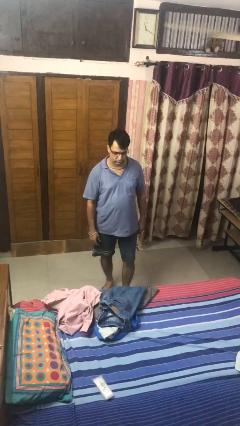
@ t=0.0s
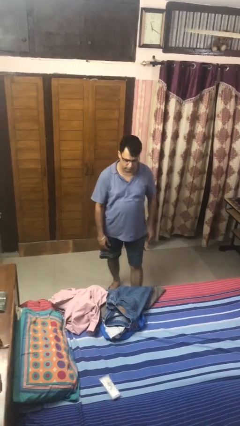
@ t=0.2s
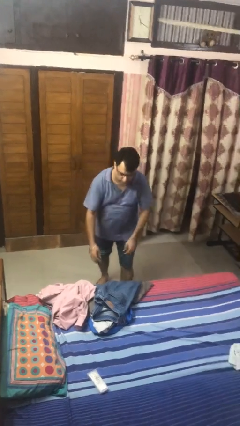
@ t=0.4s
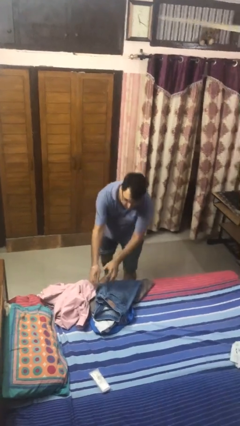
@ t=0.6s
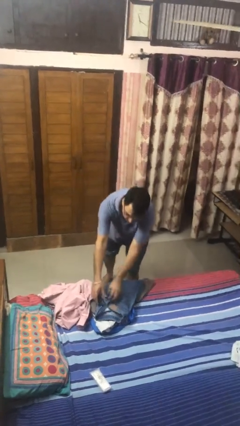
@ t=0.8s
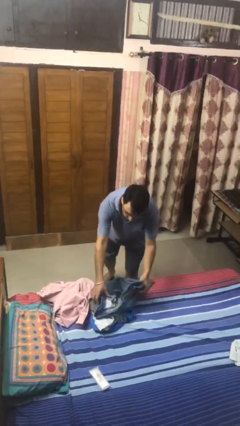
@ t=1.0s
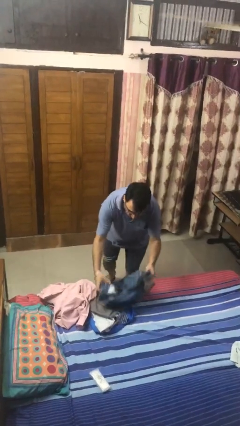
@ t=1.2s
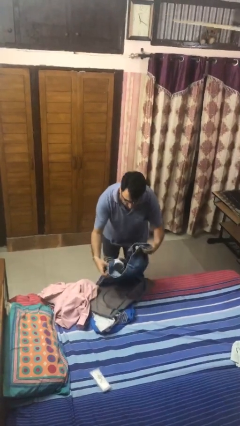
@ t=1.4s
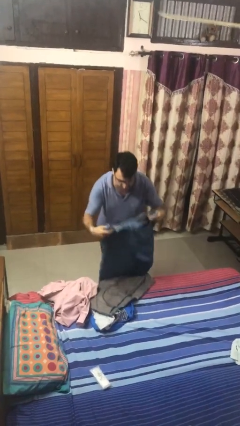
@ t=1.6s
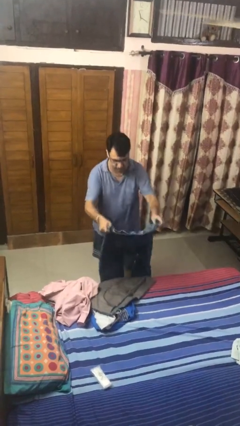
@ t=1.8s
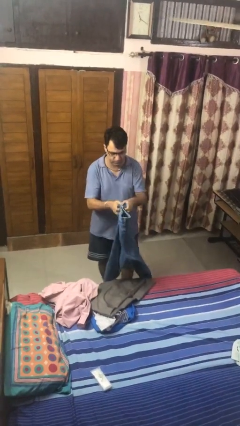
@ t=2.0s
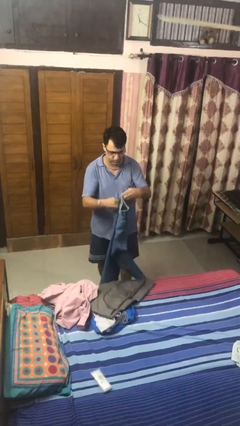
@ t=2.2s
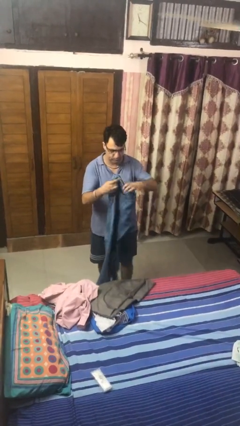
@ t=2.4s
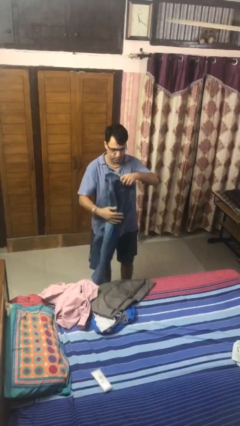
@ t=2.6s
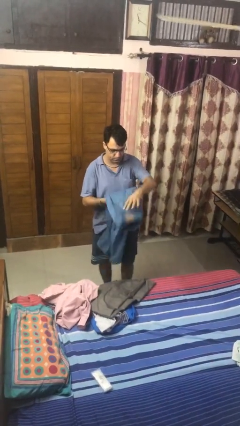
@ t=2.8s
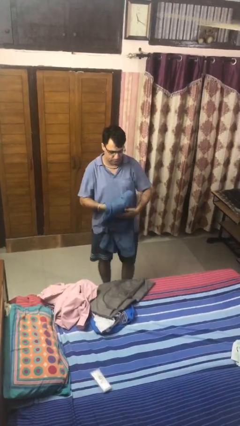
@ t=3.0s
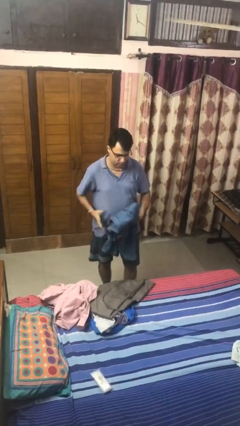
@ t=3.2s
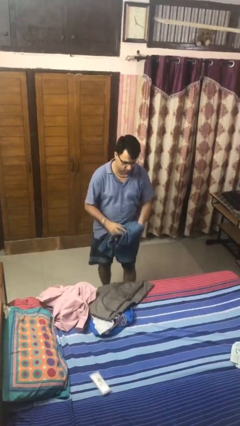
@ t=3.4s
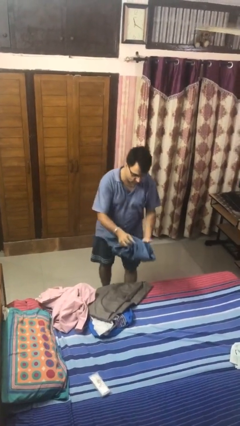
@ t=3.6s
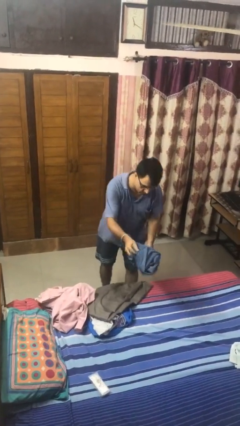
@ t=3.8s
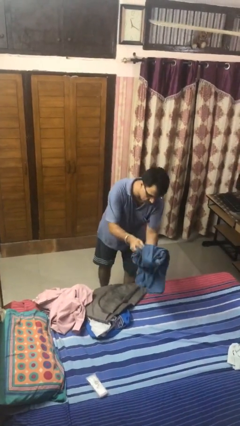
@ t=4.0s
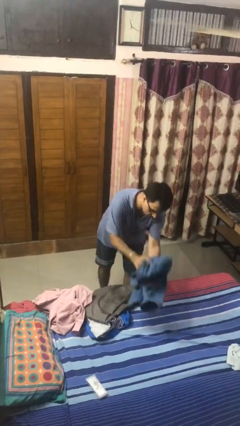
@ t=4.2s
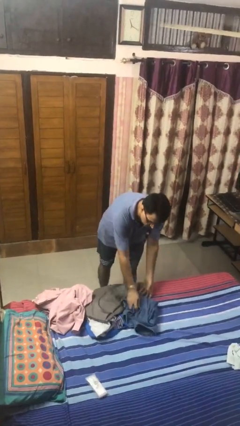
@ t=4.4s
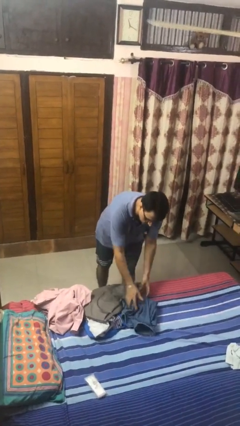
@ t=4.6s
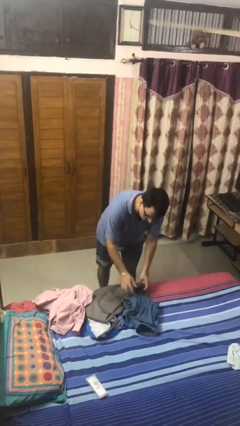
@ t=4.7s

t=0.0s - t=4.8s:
person folds pants

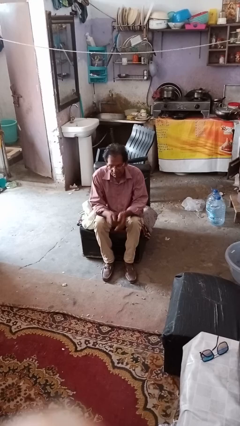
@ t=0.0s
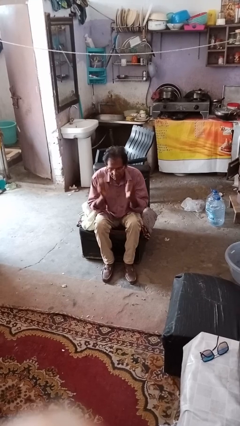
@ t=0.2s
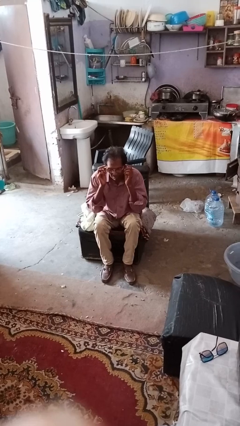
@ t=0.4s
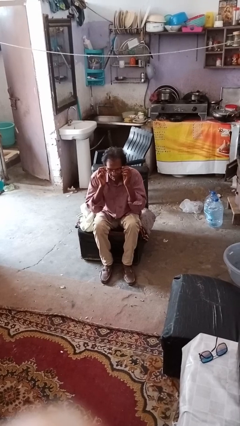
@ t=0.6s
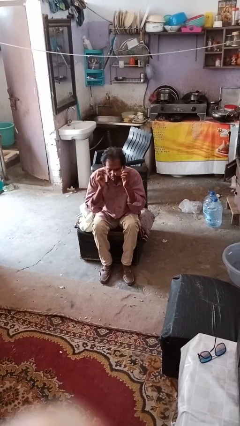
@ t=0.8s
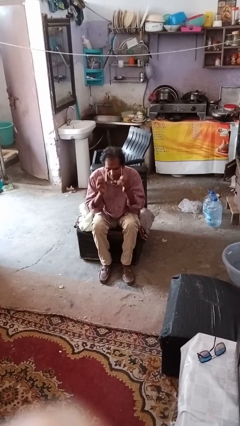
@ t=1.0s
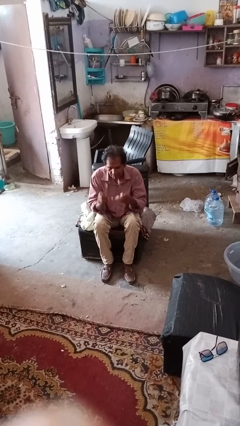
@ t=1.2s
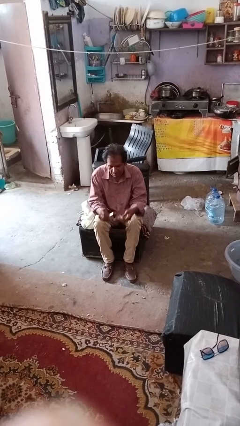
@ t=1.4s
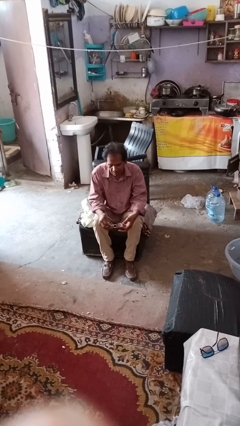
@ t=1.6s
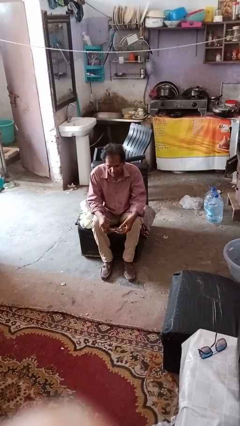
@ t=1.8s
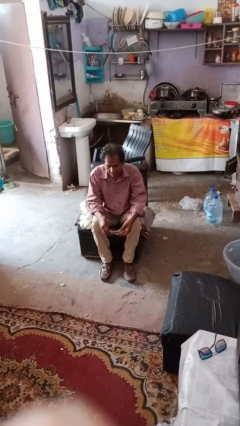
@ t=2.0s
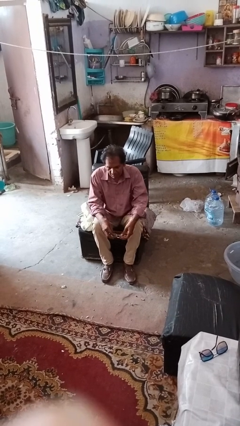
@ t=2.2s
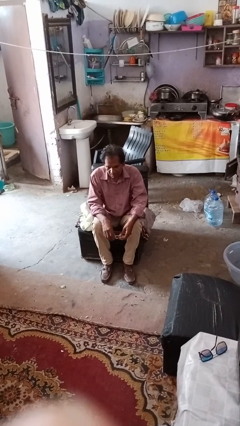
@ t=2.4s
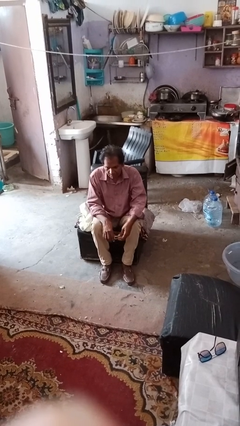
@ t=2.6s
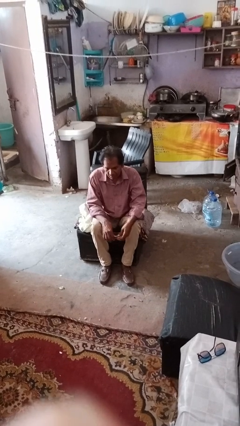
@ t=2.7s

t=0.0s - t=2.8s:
person takes off glasses

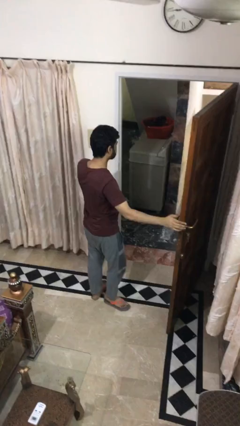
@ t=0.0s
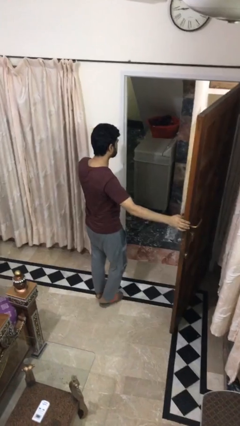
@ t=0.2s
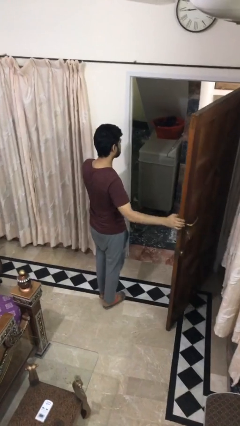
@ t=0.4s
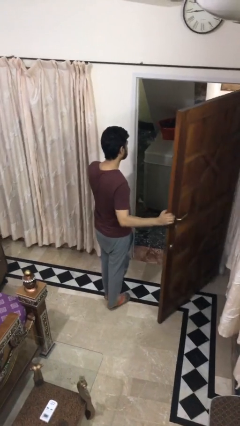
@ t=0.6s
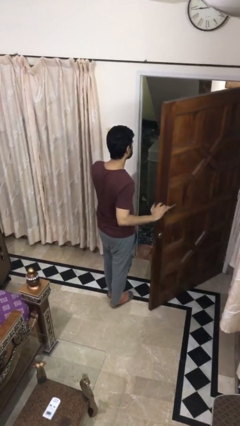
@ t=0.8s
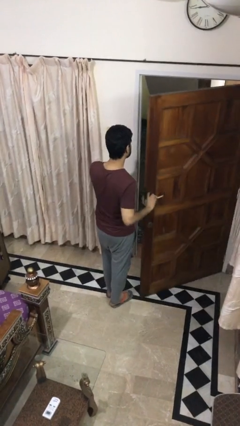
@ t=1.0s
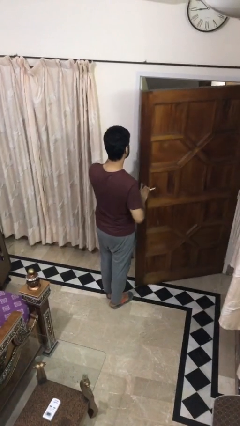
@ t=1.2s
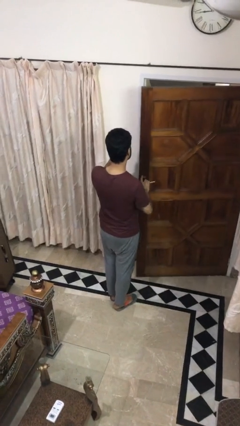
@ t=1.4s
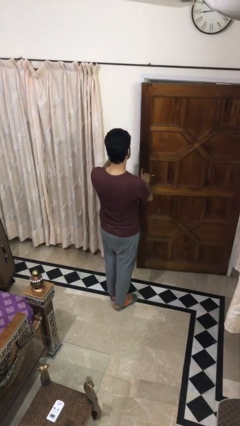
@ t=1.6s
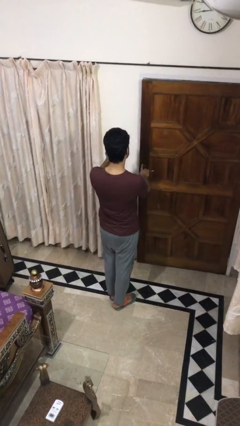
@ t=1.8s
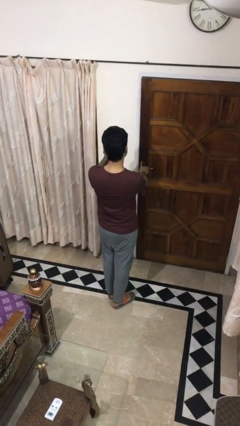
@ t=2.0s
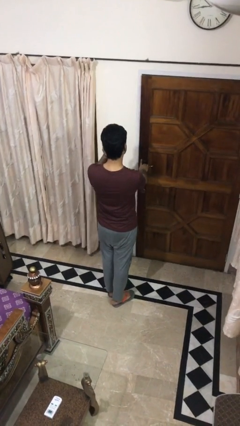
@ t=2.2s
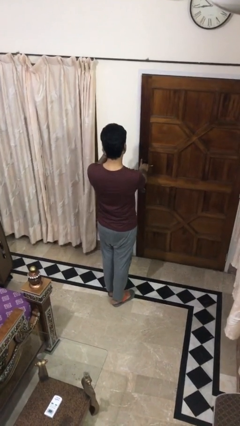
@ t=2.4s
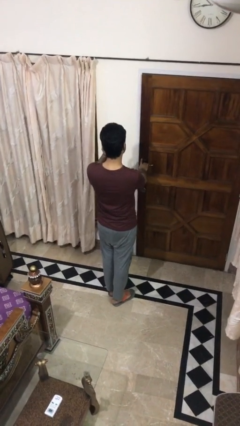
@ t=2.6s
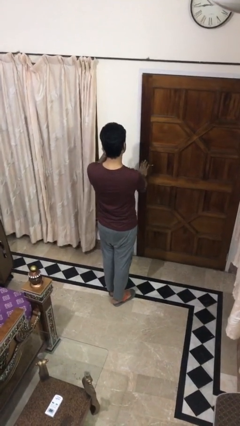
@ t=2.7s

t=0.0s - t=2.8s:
person closes facility door

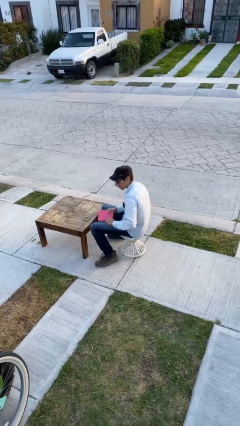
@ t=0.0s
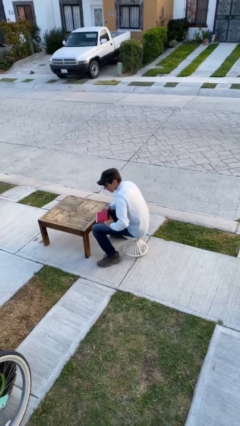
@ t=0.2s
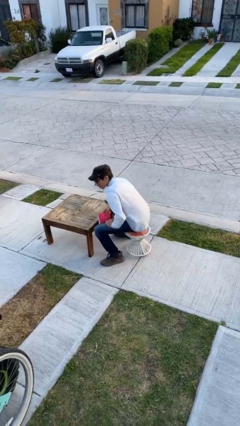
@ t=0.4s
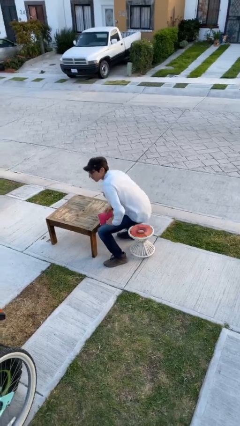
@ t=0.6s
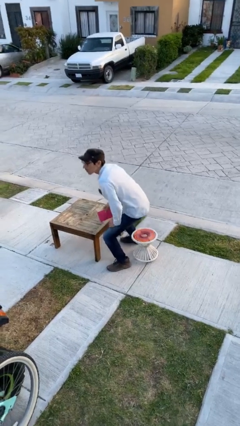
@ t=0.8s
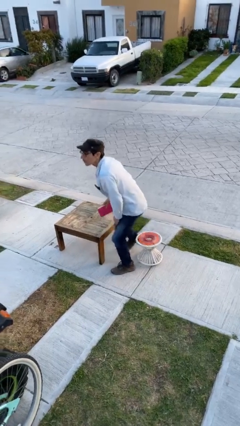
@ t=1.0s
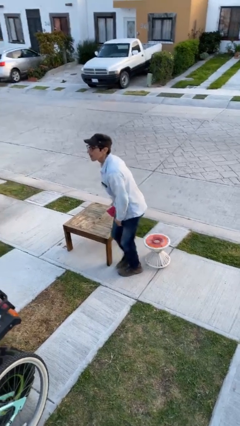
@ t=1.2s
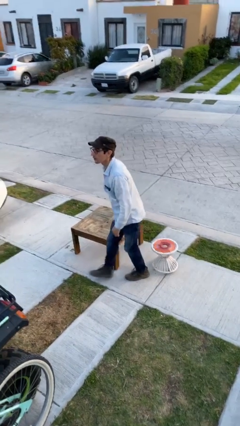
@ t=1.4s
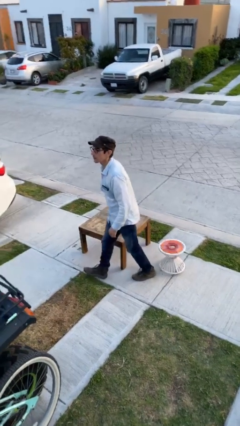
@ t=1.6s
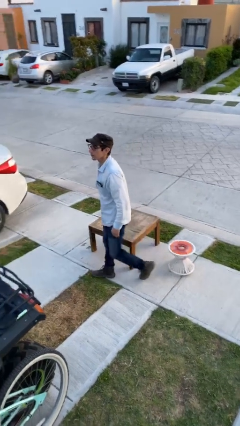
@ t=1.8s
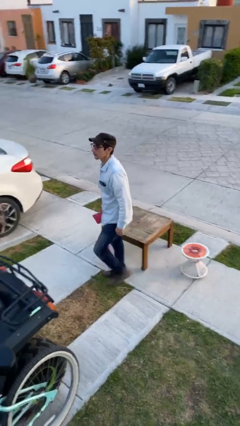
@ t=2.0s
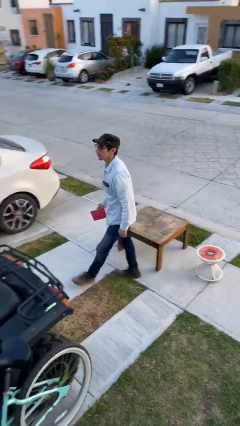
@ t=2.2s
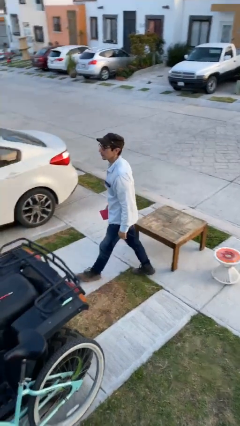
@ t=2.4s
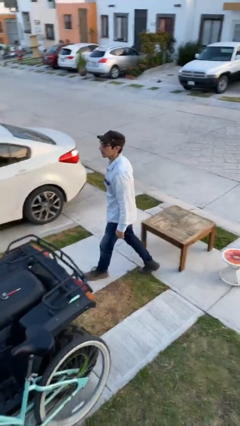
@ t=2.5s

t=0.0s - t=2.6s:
person stands up

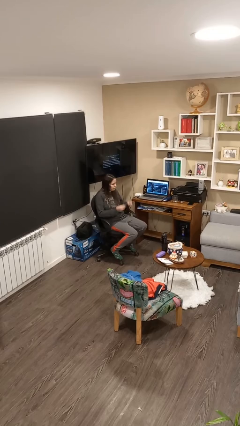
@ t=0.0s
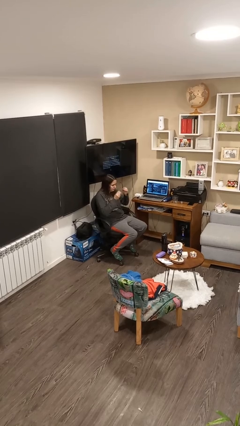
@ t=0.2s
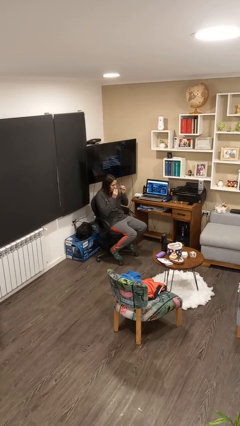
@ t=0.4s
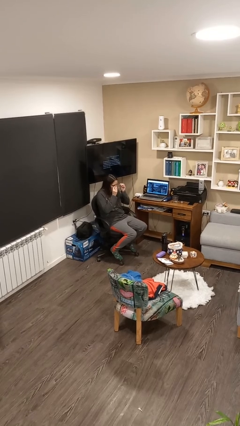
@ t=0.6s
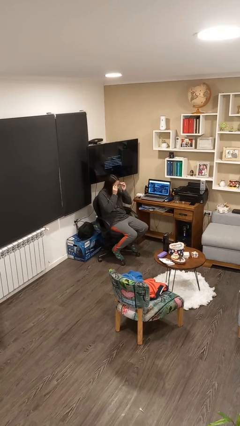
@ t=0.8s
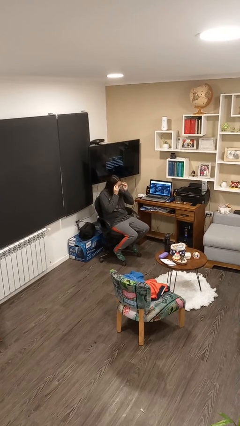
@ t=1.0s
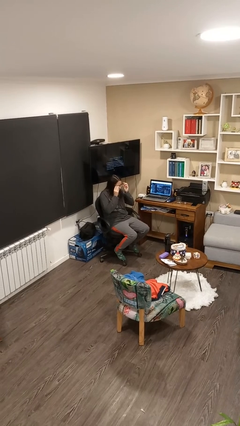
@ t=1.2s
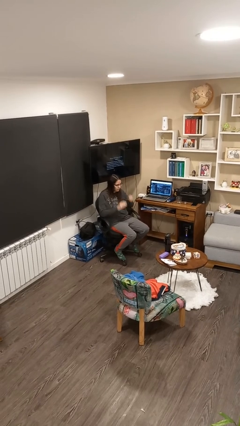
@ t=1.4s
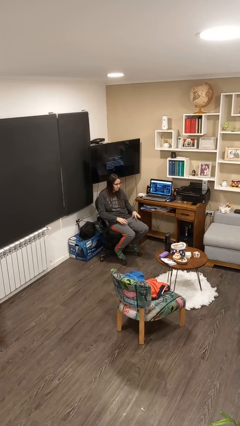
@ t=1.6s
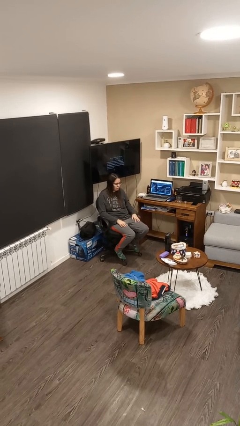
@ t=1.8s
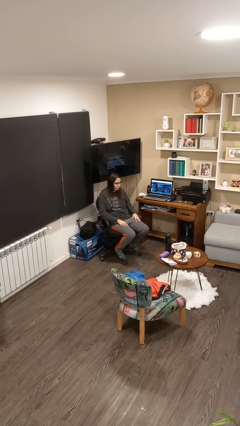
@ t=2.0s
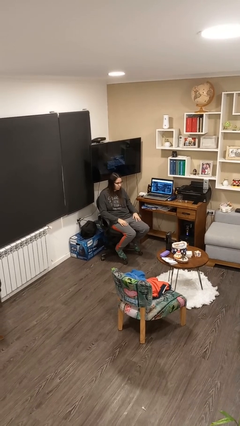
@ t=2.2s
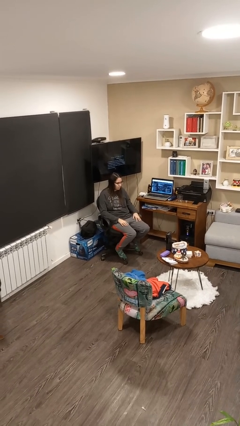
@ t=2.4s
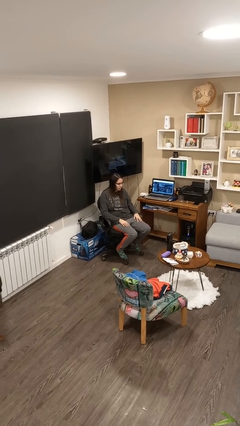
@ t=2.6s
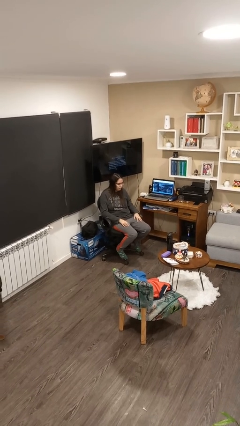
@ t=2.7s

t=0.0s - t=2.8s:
person puts on glasses

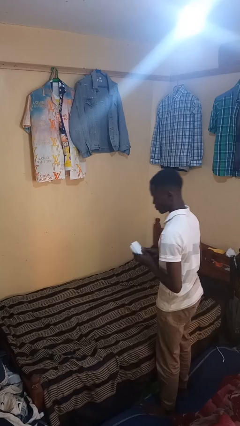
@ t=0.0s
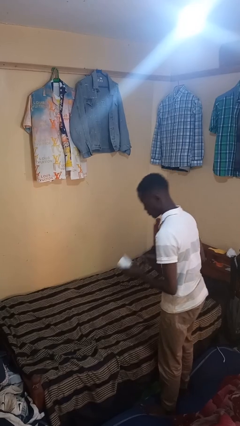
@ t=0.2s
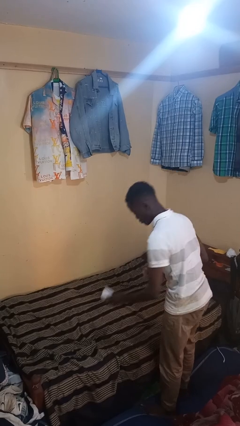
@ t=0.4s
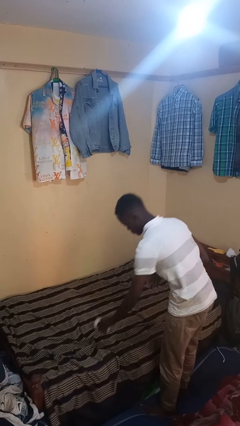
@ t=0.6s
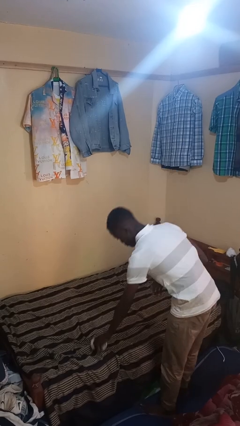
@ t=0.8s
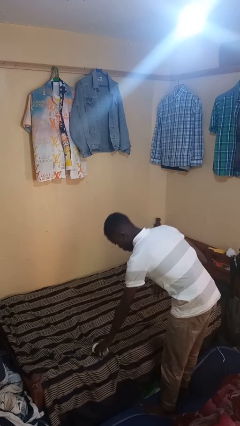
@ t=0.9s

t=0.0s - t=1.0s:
person puts down object on bed

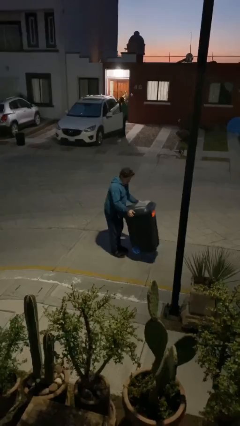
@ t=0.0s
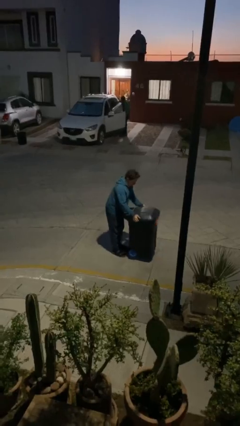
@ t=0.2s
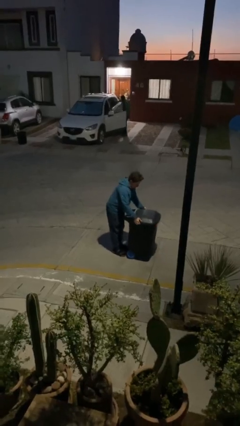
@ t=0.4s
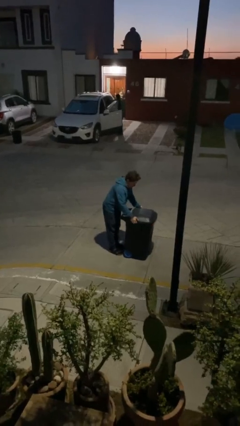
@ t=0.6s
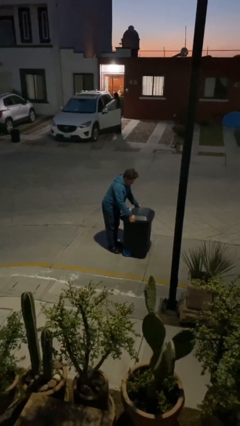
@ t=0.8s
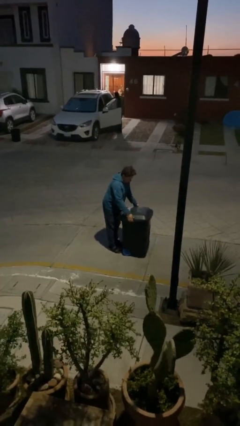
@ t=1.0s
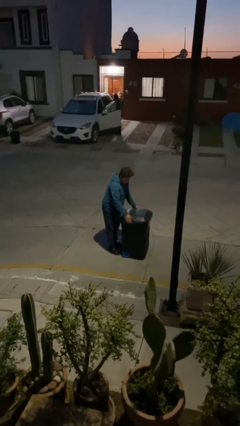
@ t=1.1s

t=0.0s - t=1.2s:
person puts down object on floor
